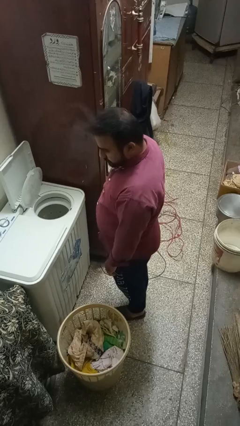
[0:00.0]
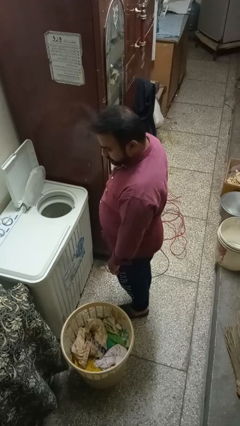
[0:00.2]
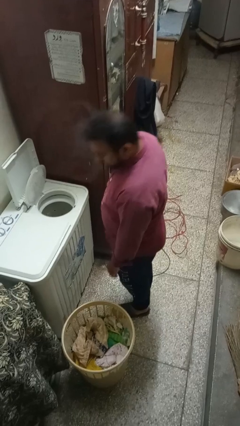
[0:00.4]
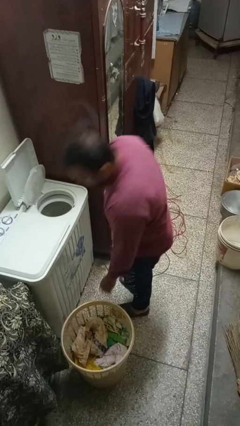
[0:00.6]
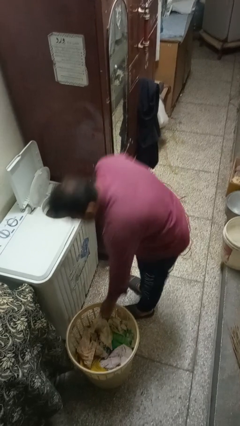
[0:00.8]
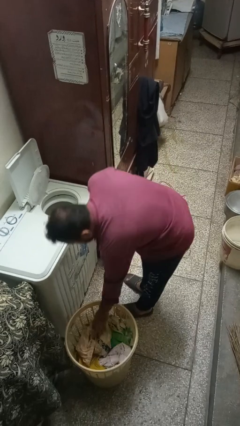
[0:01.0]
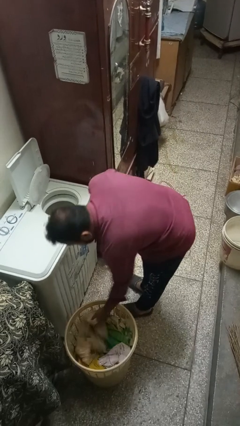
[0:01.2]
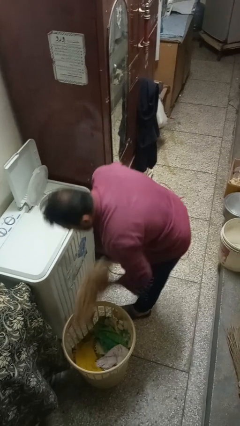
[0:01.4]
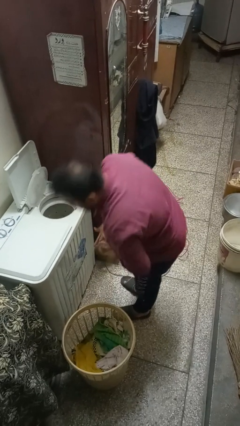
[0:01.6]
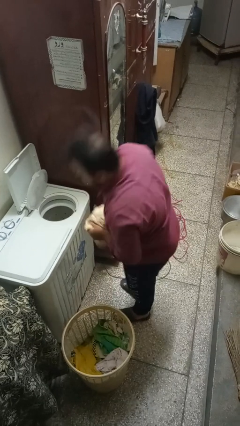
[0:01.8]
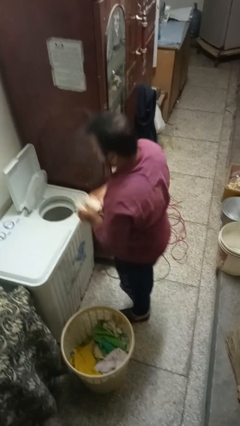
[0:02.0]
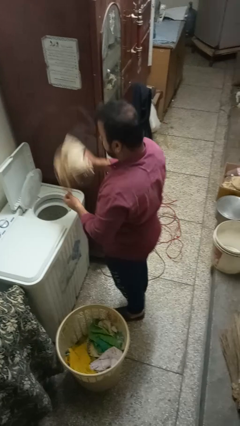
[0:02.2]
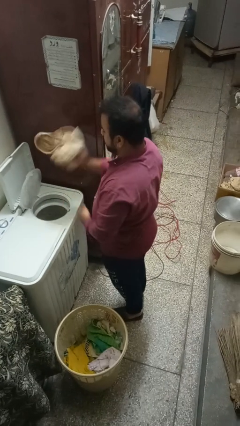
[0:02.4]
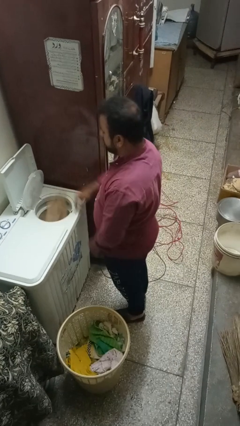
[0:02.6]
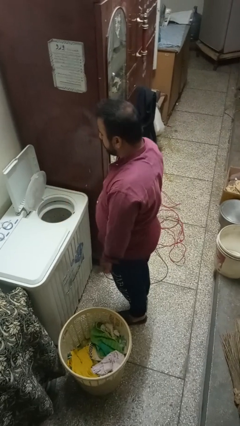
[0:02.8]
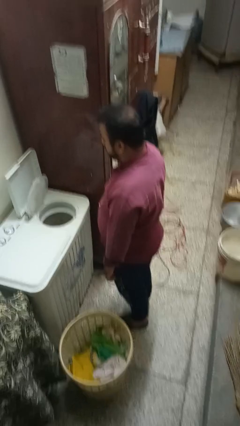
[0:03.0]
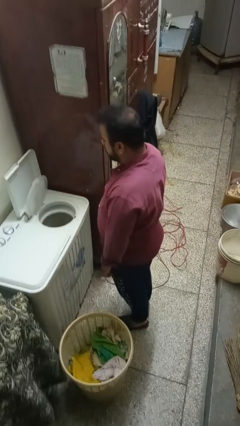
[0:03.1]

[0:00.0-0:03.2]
person loads dryer

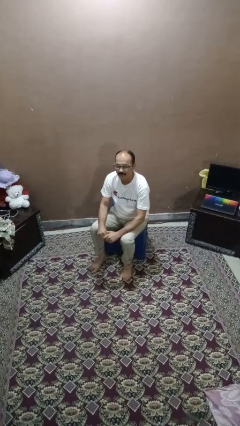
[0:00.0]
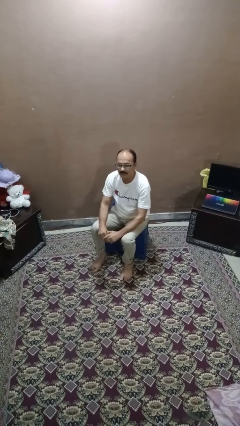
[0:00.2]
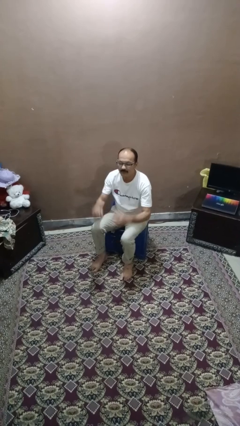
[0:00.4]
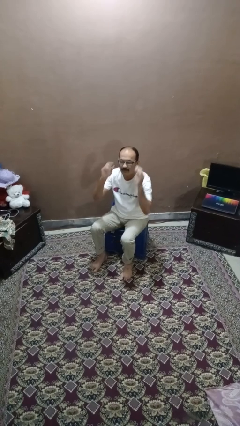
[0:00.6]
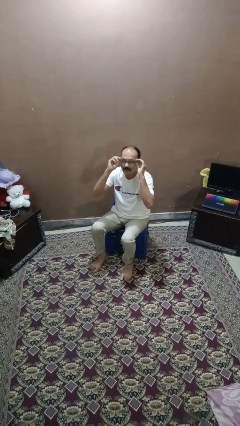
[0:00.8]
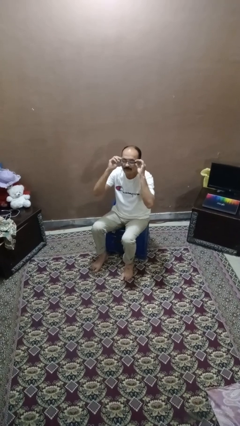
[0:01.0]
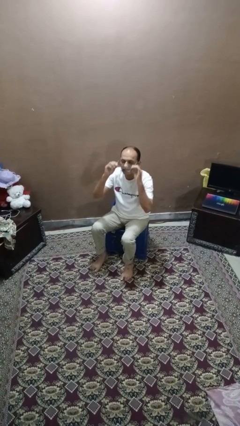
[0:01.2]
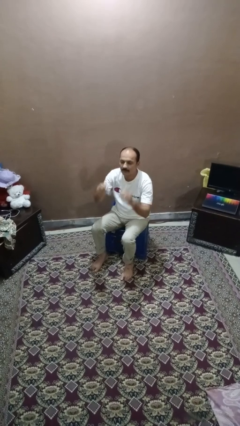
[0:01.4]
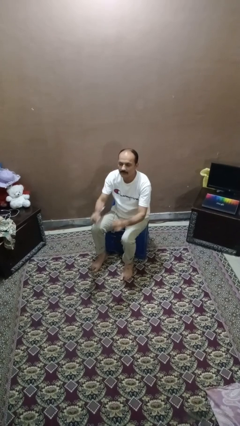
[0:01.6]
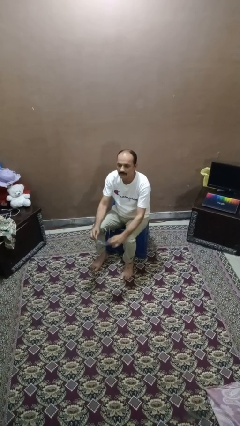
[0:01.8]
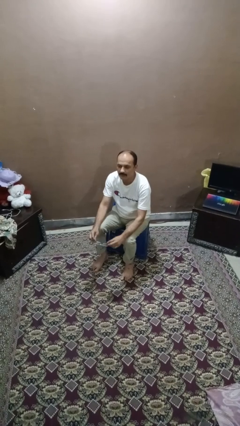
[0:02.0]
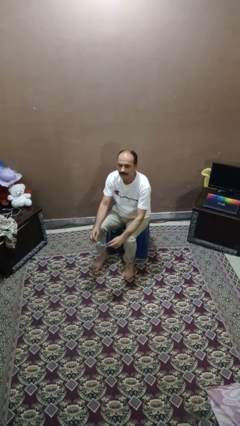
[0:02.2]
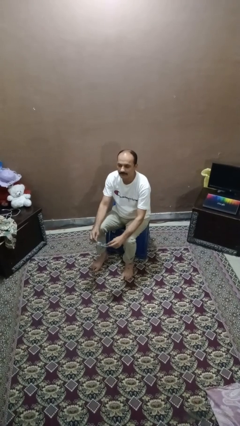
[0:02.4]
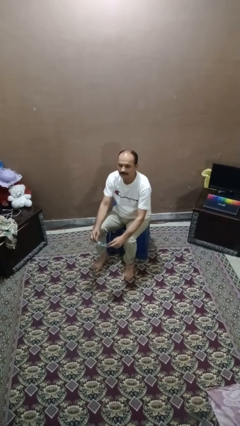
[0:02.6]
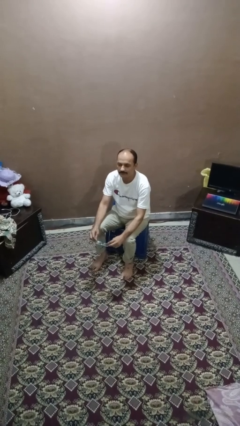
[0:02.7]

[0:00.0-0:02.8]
person takes off glasses

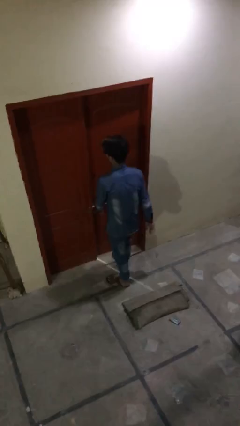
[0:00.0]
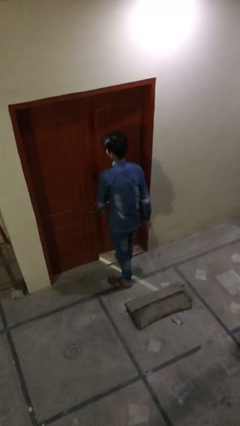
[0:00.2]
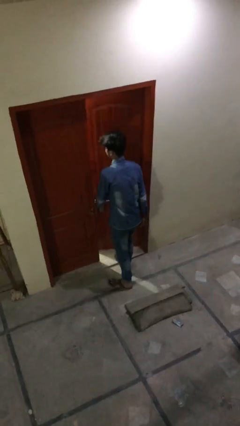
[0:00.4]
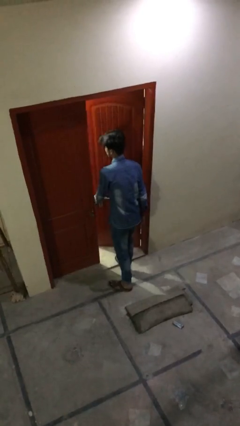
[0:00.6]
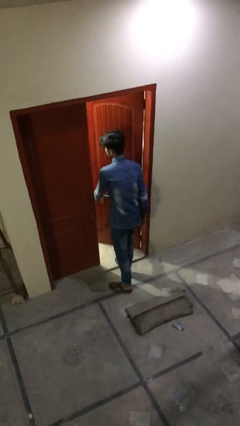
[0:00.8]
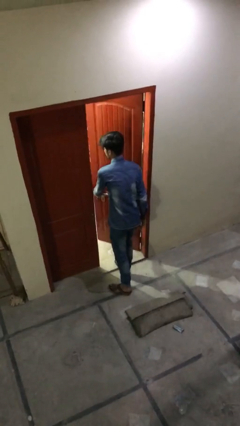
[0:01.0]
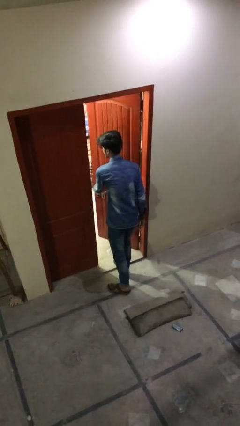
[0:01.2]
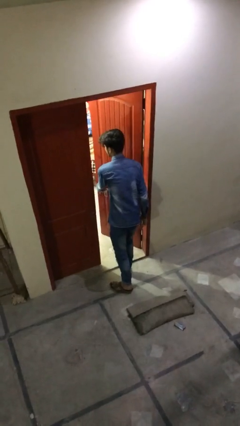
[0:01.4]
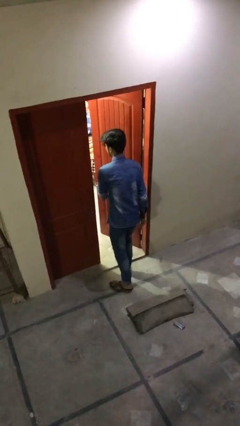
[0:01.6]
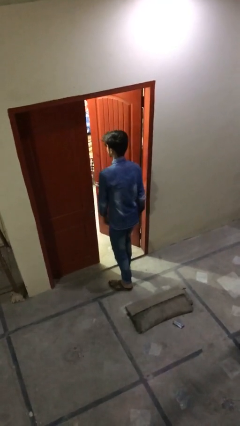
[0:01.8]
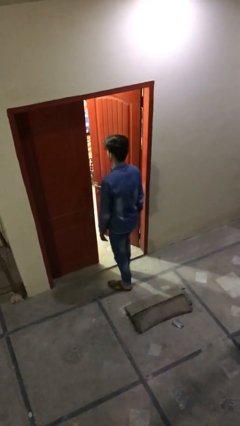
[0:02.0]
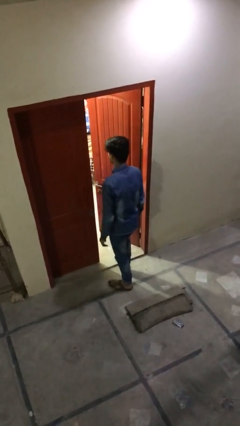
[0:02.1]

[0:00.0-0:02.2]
person opens facility door

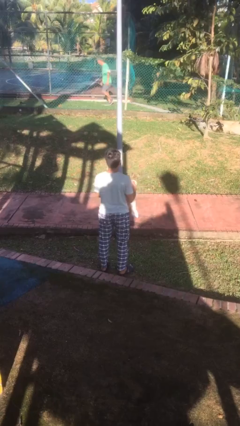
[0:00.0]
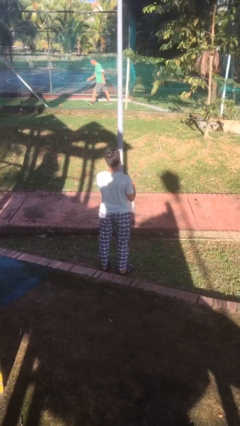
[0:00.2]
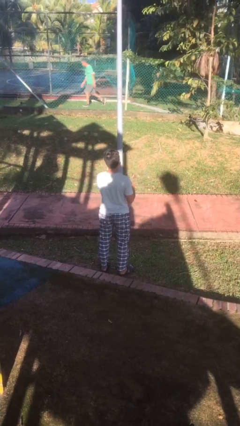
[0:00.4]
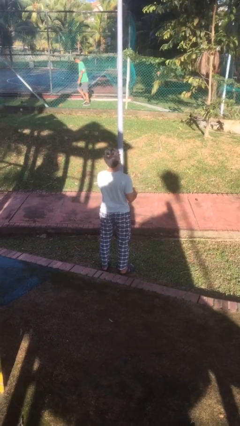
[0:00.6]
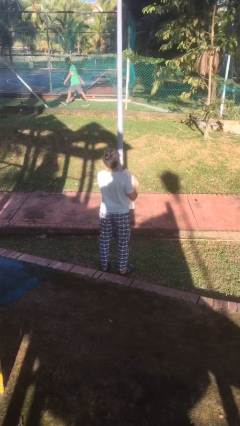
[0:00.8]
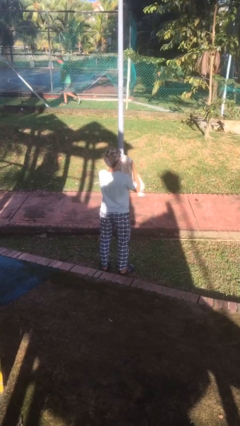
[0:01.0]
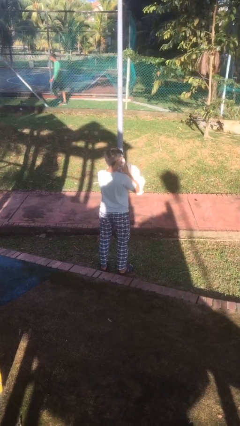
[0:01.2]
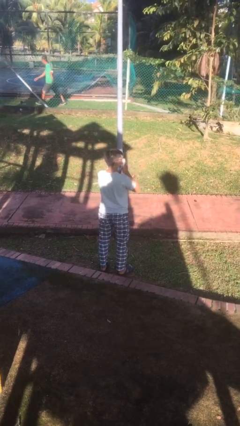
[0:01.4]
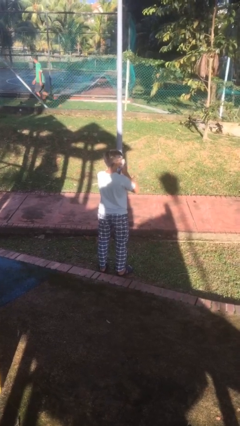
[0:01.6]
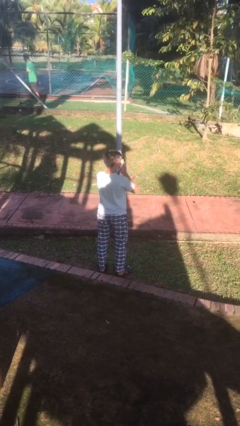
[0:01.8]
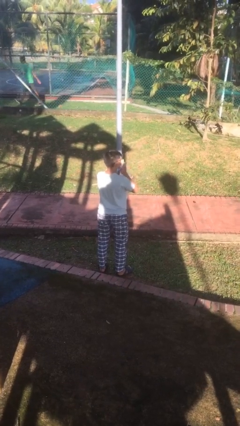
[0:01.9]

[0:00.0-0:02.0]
person blows nose

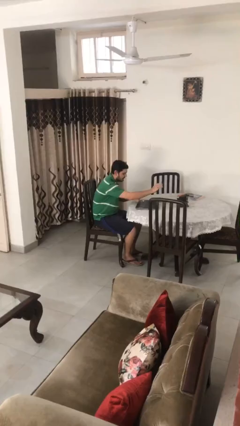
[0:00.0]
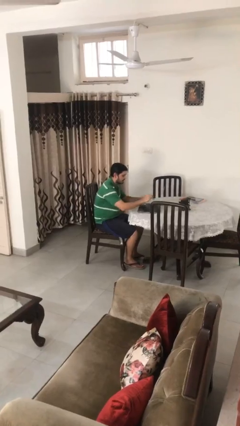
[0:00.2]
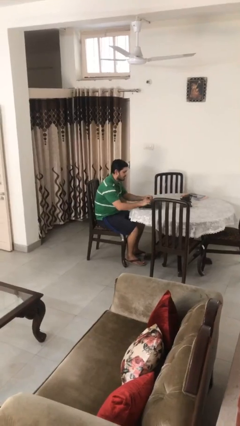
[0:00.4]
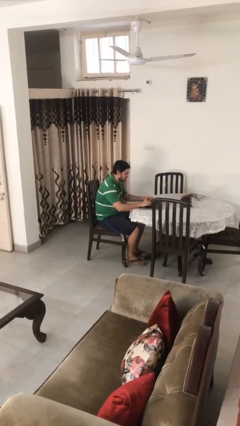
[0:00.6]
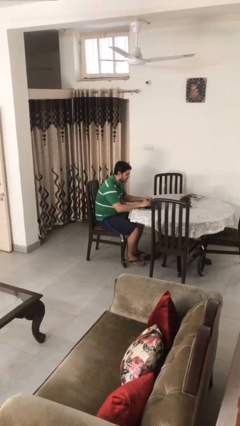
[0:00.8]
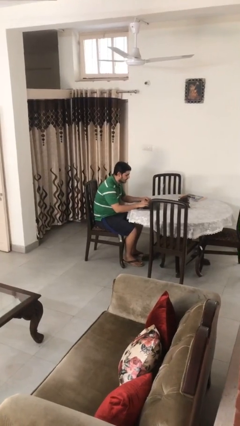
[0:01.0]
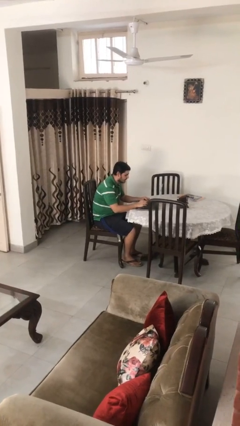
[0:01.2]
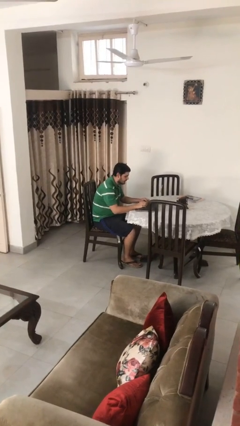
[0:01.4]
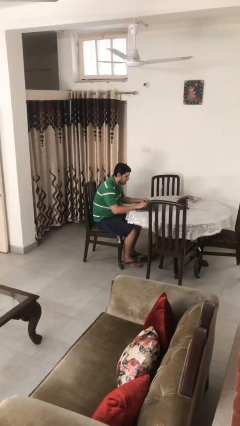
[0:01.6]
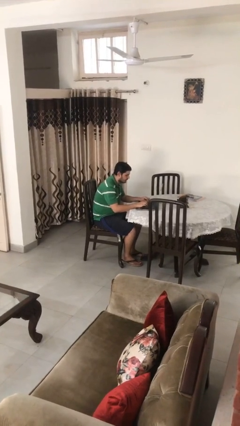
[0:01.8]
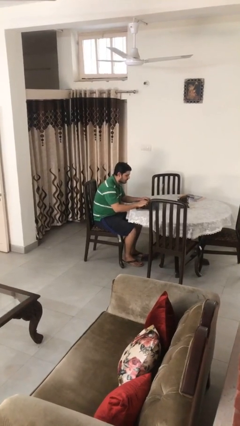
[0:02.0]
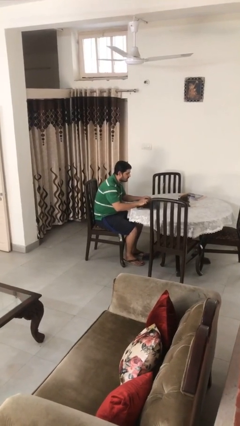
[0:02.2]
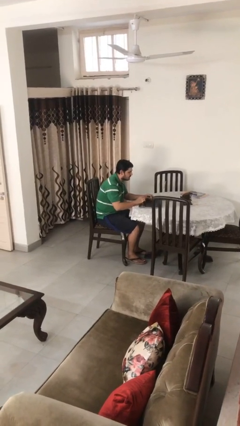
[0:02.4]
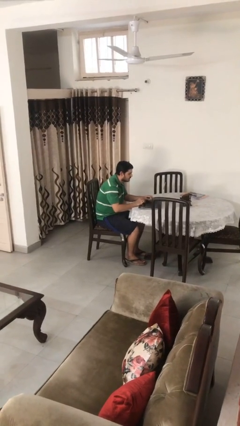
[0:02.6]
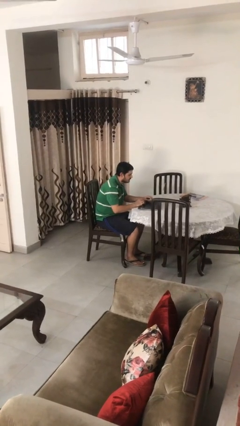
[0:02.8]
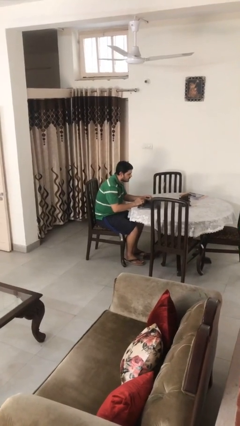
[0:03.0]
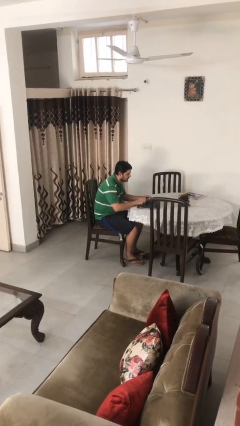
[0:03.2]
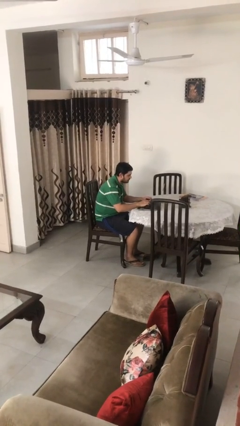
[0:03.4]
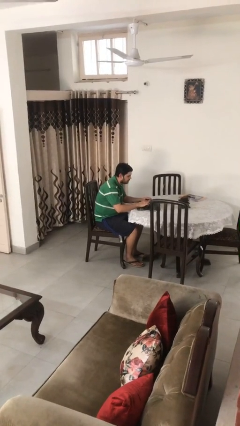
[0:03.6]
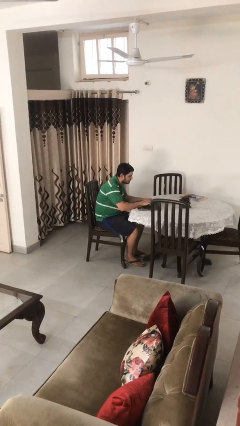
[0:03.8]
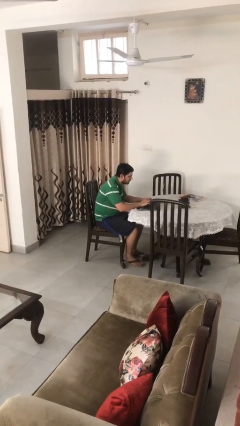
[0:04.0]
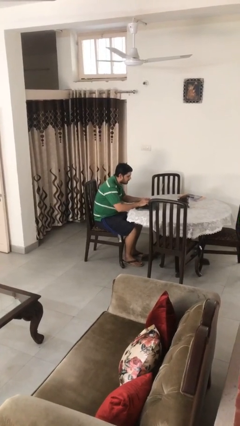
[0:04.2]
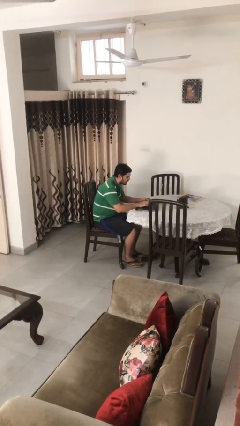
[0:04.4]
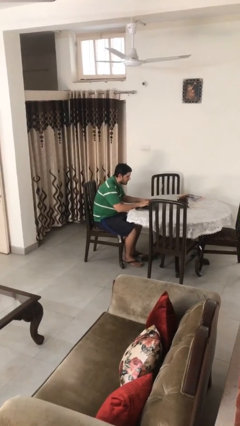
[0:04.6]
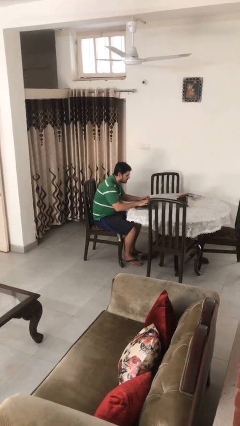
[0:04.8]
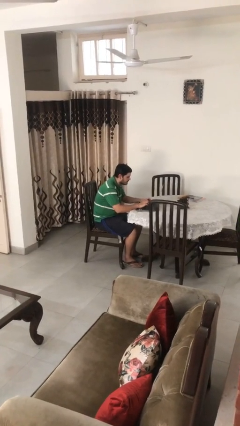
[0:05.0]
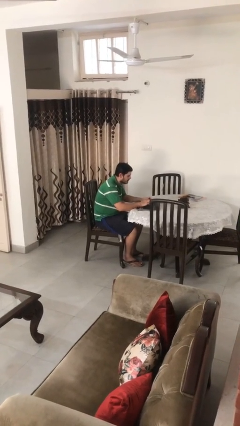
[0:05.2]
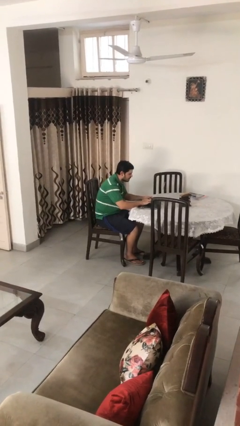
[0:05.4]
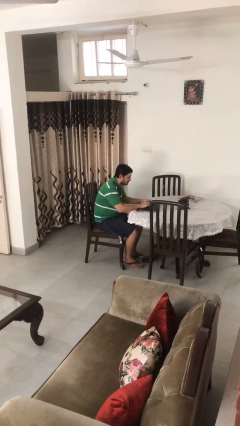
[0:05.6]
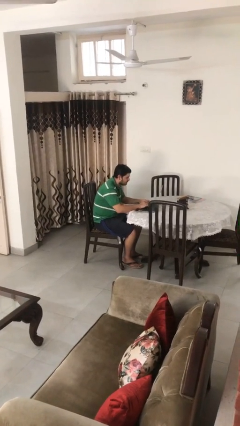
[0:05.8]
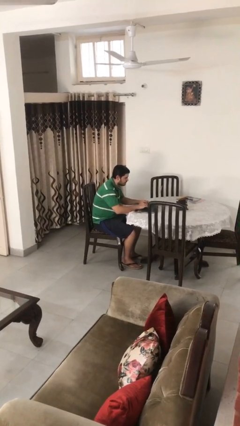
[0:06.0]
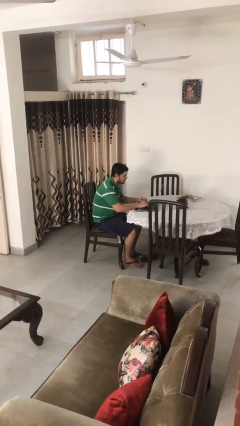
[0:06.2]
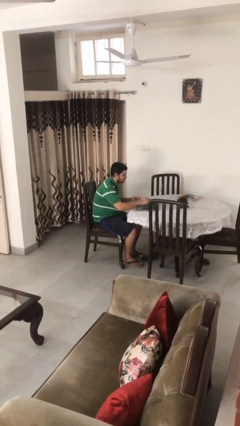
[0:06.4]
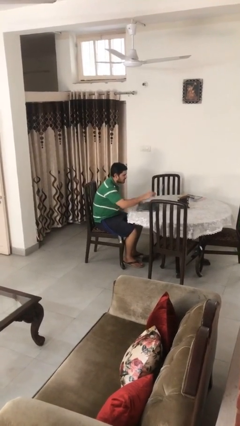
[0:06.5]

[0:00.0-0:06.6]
person interacts with laptop
